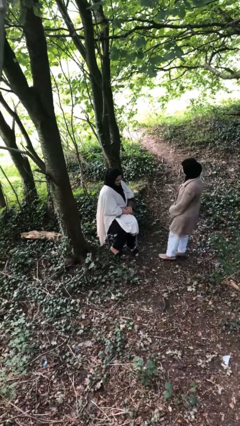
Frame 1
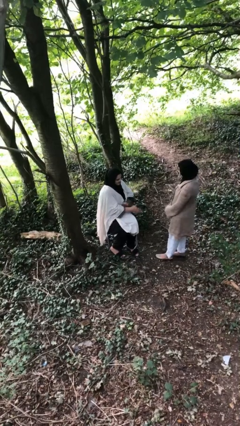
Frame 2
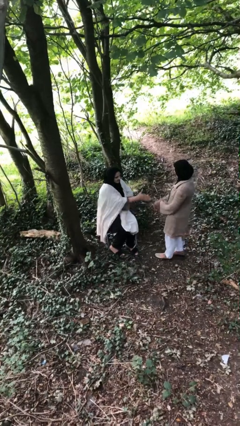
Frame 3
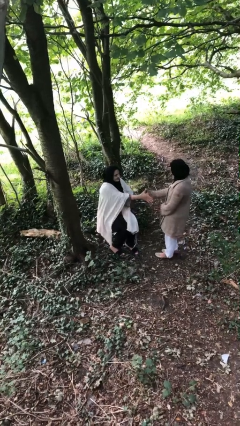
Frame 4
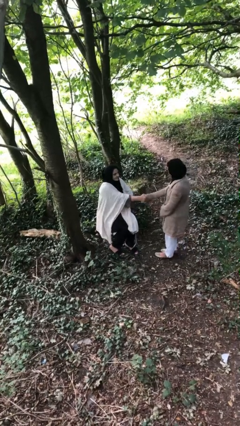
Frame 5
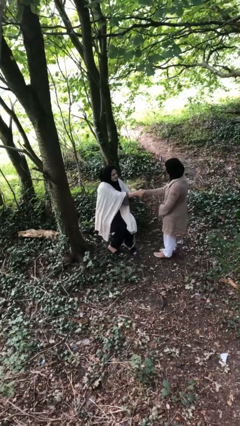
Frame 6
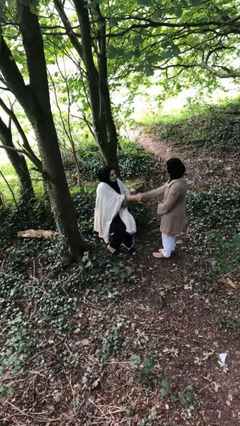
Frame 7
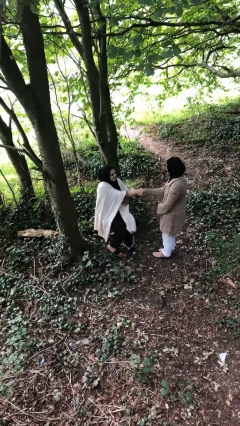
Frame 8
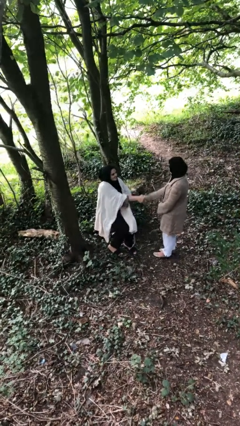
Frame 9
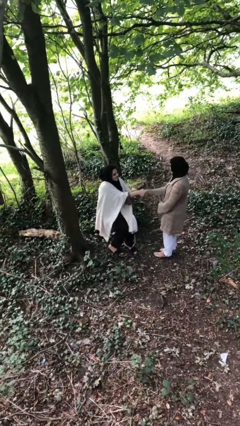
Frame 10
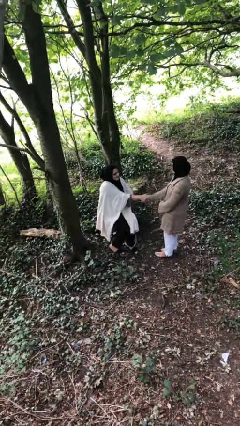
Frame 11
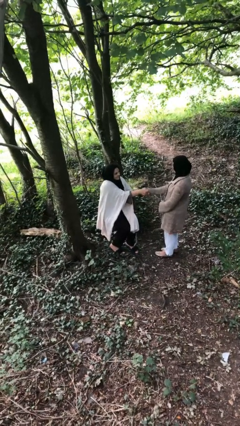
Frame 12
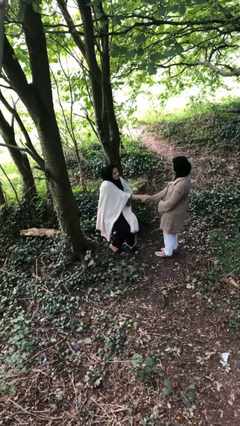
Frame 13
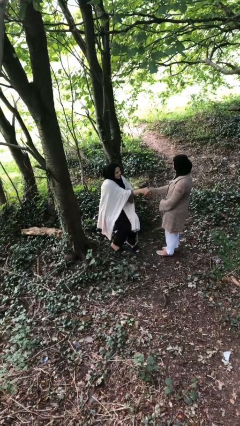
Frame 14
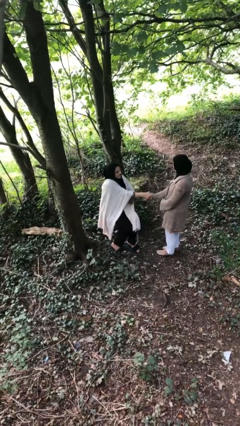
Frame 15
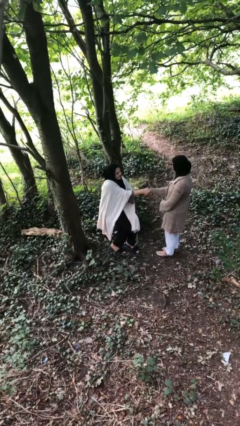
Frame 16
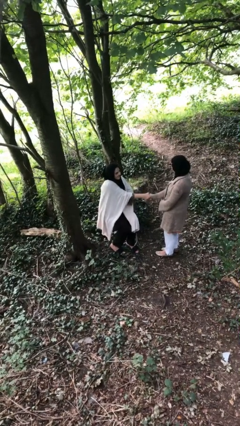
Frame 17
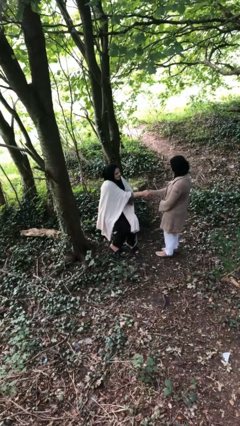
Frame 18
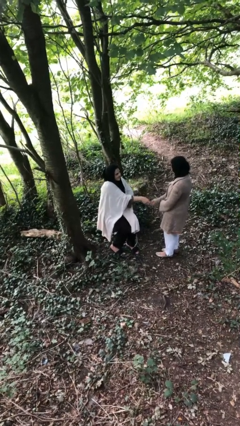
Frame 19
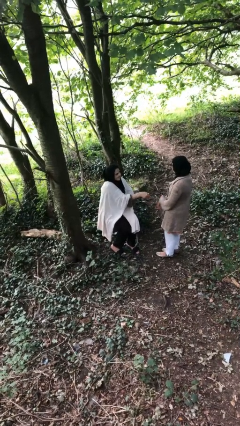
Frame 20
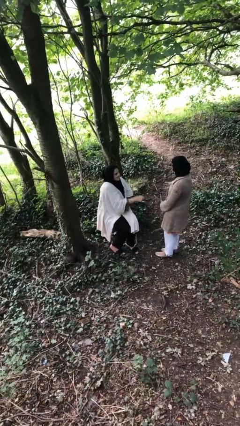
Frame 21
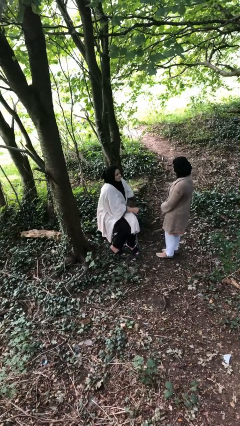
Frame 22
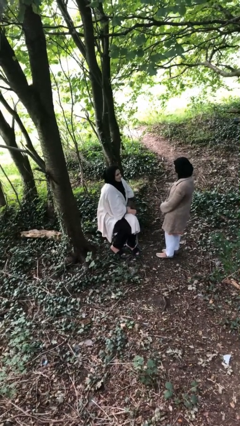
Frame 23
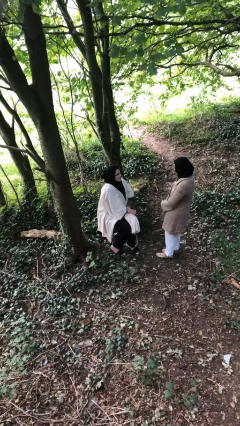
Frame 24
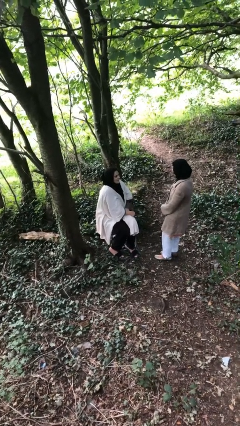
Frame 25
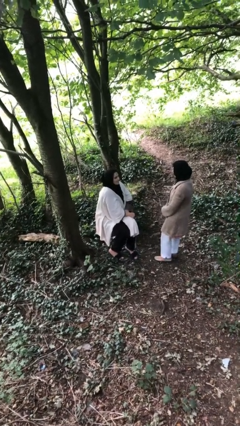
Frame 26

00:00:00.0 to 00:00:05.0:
person shakes hand

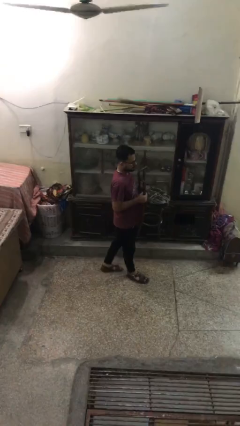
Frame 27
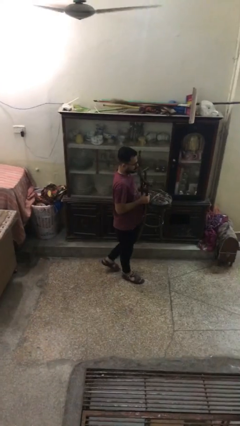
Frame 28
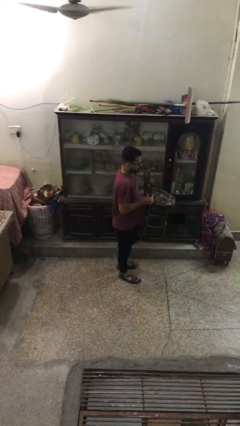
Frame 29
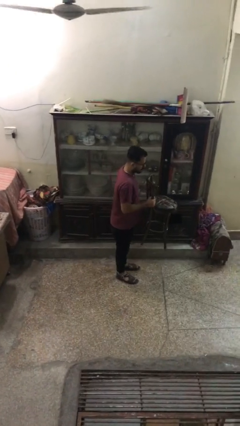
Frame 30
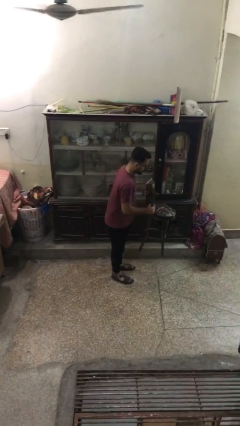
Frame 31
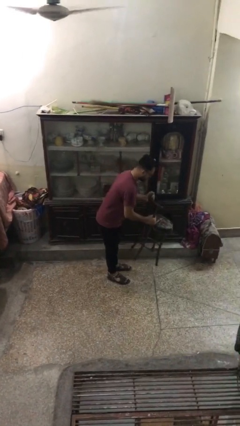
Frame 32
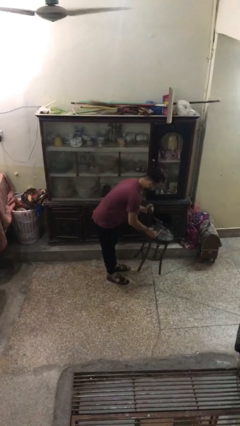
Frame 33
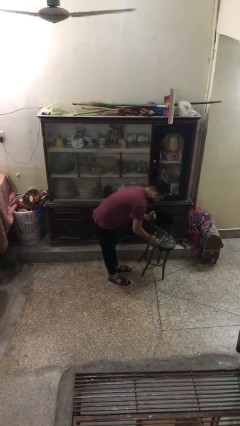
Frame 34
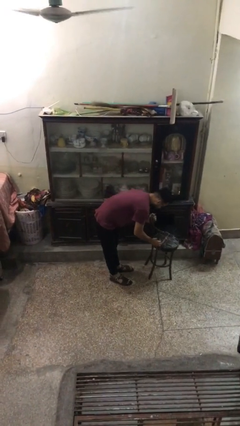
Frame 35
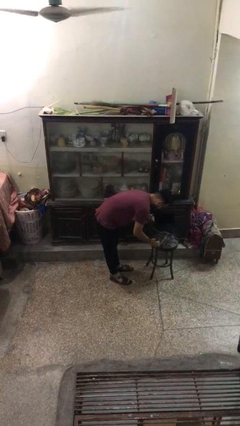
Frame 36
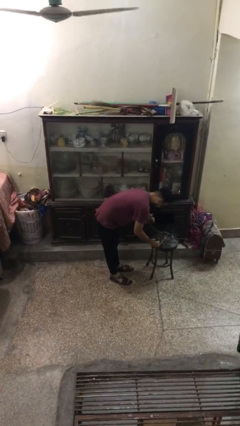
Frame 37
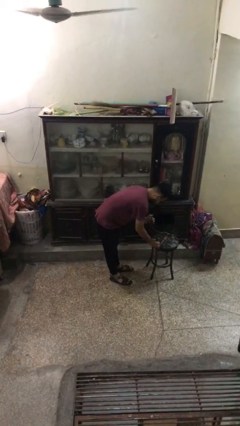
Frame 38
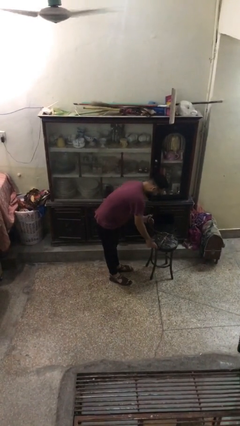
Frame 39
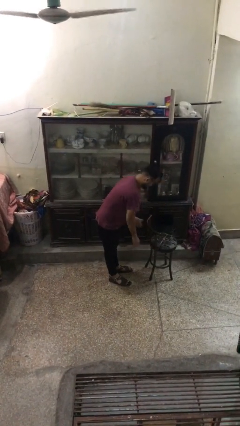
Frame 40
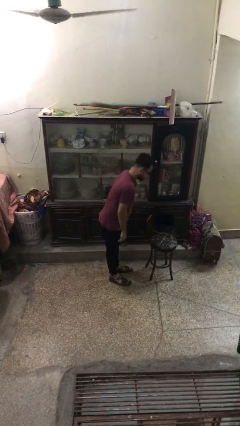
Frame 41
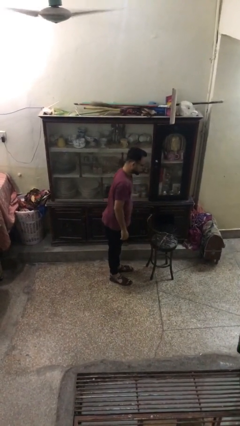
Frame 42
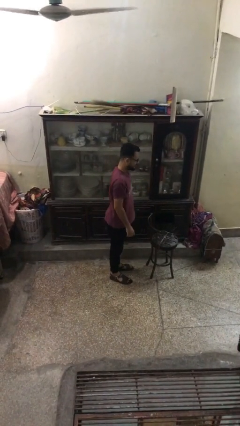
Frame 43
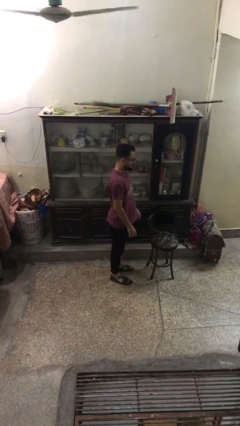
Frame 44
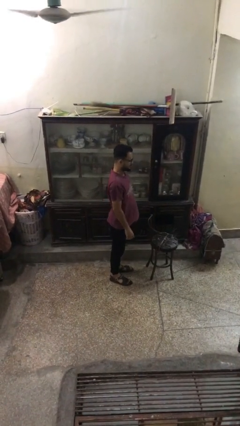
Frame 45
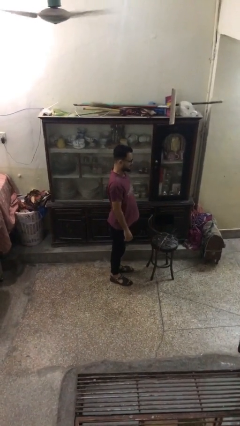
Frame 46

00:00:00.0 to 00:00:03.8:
person puts down object on floor

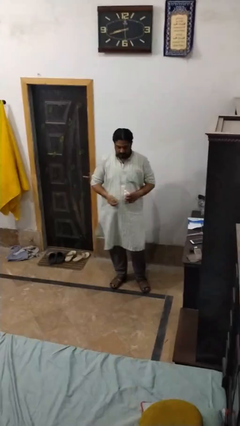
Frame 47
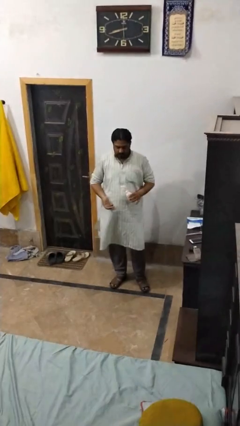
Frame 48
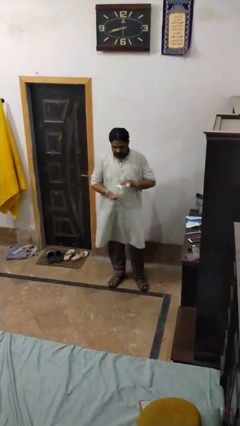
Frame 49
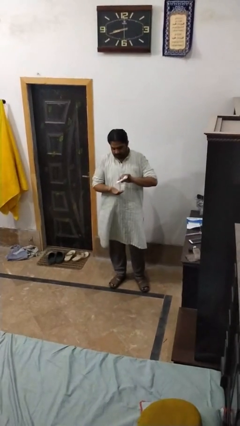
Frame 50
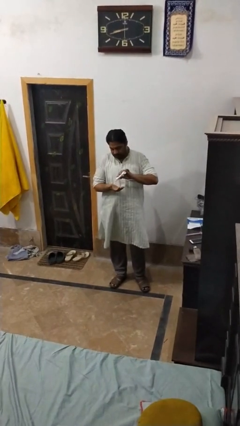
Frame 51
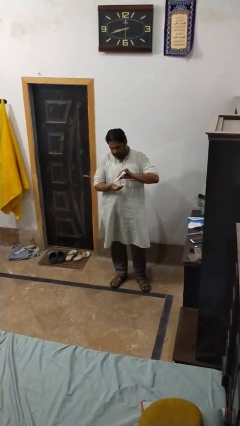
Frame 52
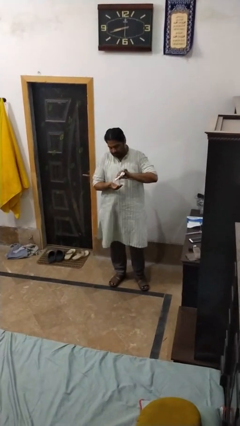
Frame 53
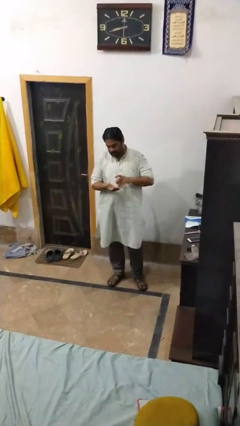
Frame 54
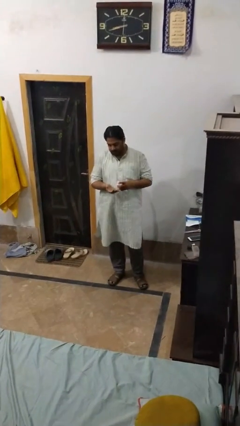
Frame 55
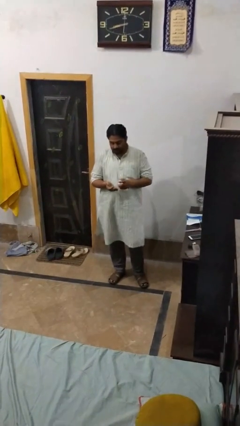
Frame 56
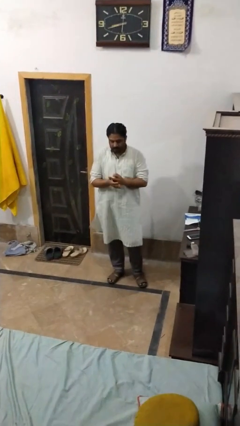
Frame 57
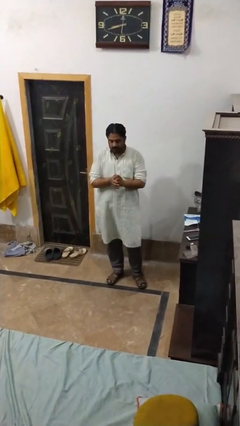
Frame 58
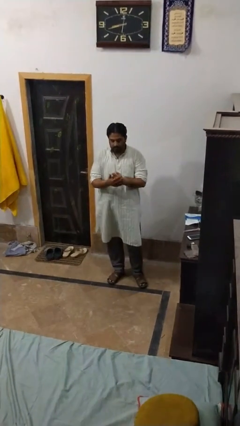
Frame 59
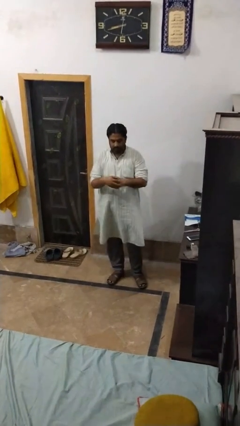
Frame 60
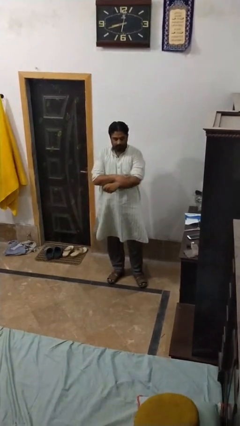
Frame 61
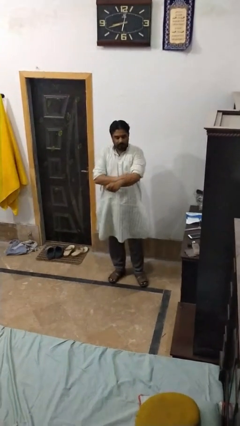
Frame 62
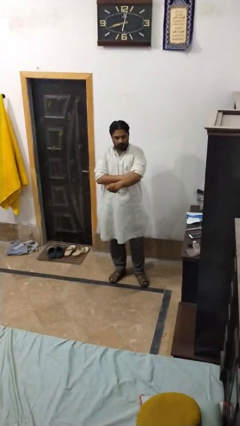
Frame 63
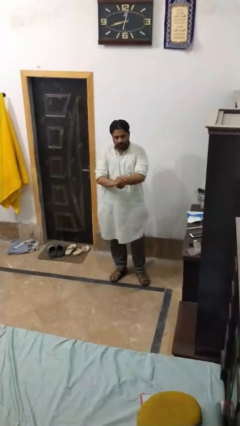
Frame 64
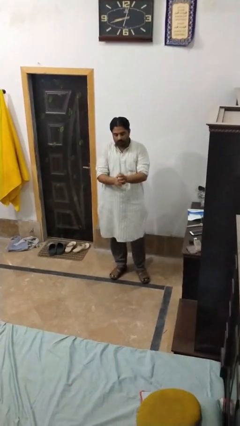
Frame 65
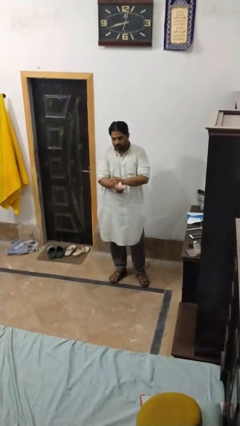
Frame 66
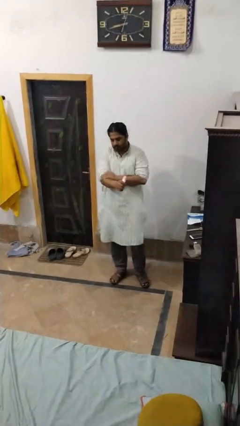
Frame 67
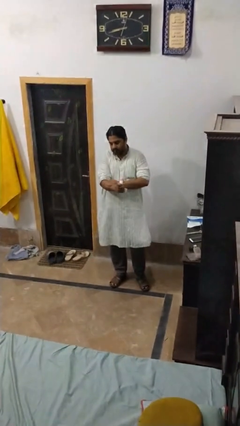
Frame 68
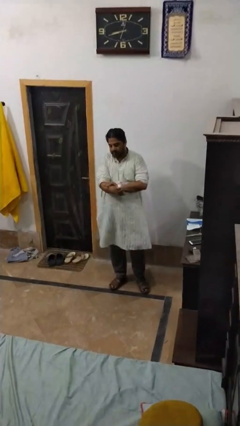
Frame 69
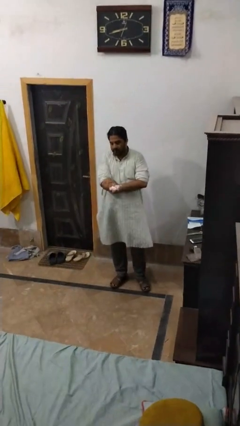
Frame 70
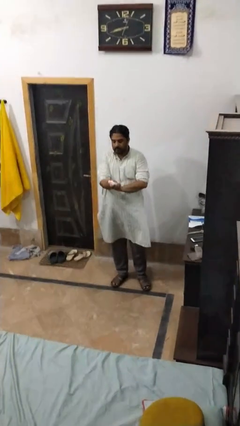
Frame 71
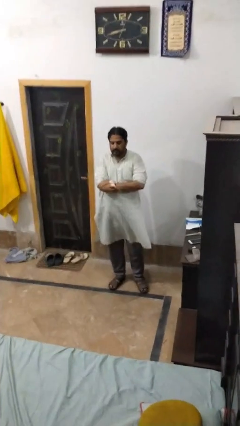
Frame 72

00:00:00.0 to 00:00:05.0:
person applies sunscreen

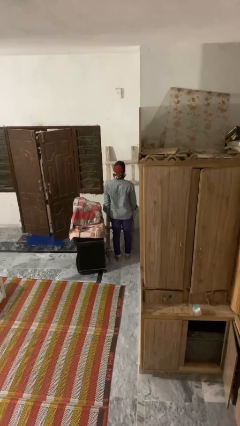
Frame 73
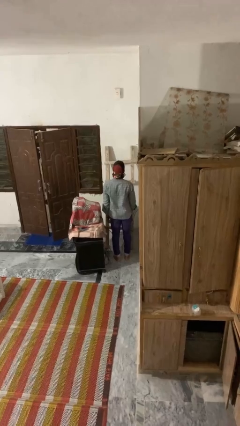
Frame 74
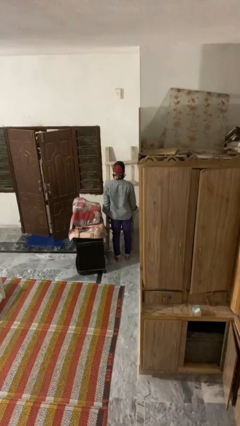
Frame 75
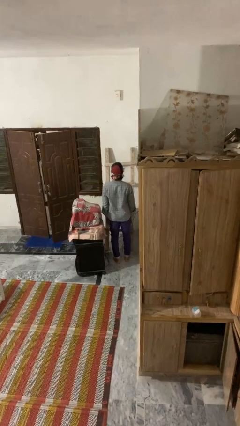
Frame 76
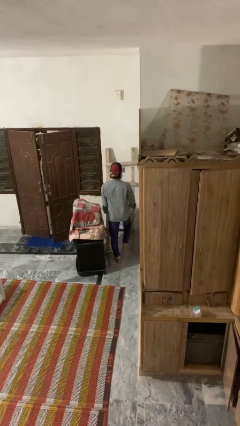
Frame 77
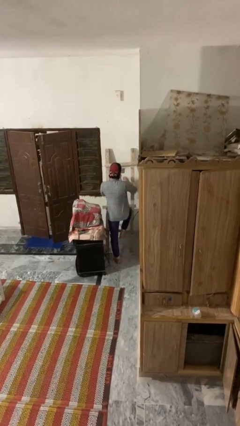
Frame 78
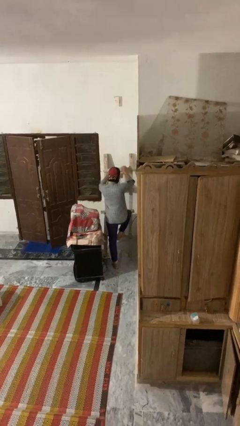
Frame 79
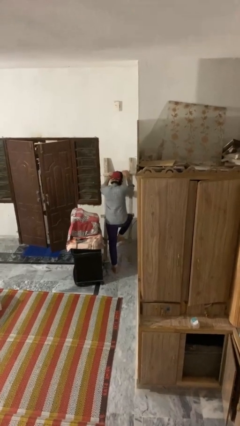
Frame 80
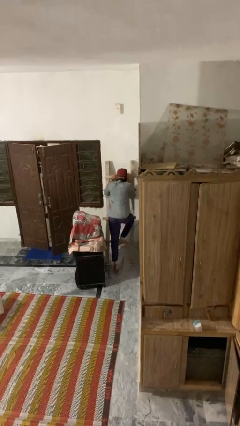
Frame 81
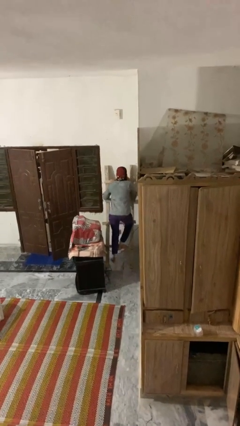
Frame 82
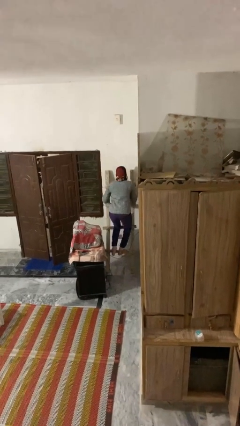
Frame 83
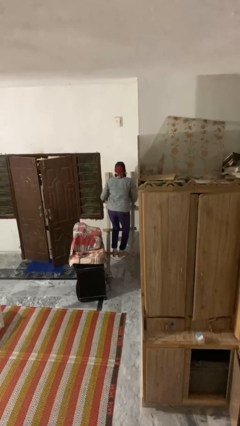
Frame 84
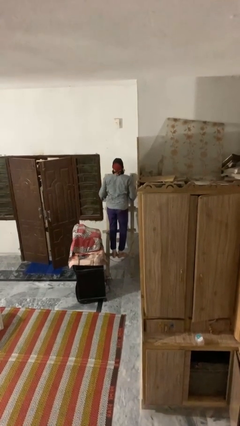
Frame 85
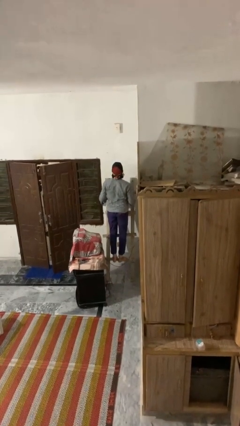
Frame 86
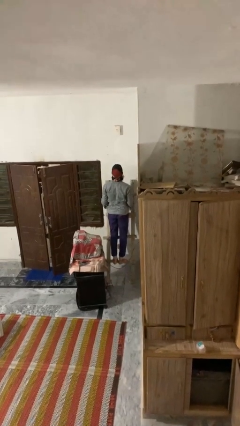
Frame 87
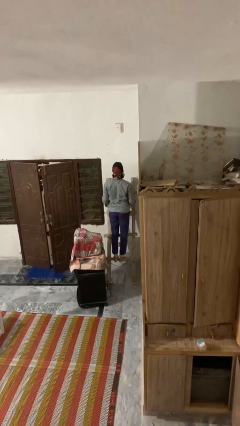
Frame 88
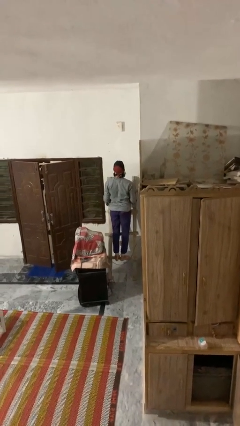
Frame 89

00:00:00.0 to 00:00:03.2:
person climbs up ladder

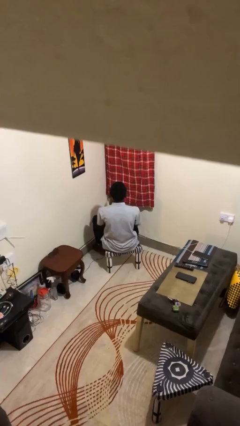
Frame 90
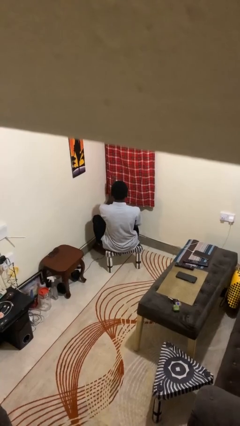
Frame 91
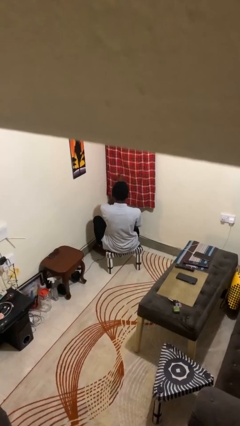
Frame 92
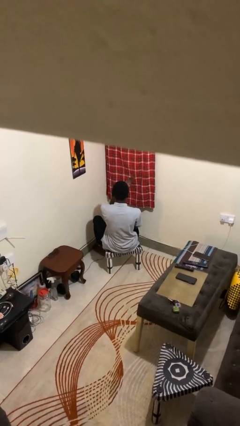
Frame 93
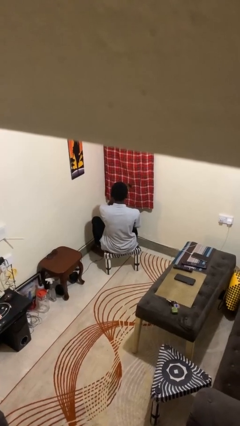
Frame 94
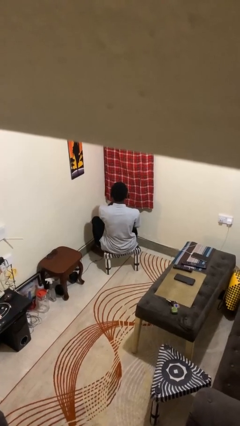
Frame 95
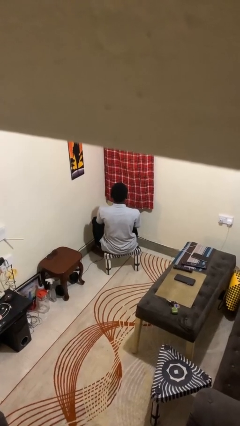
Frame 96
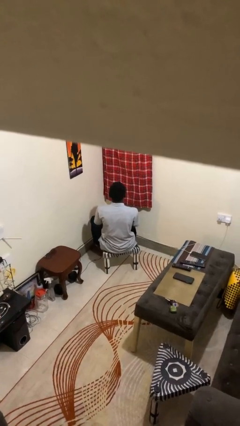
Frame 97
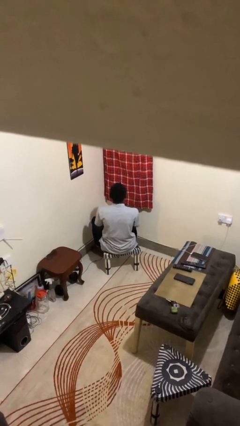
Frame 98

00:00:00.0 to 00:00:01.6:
person gestures swipe right
